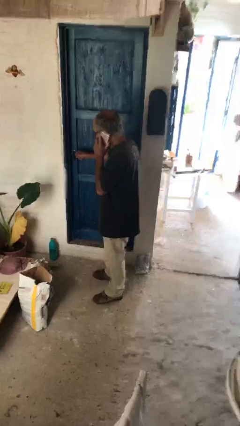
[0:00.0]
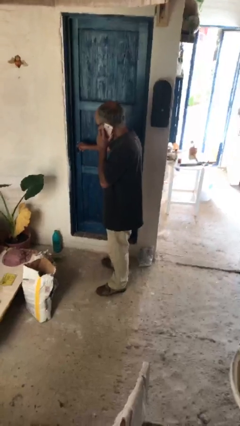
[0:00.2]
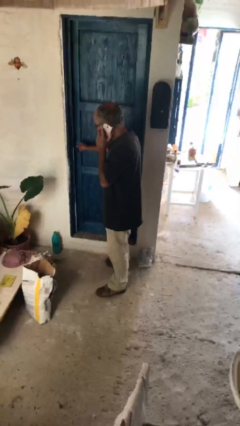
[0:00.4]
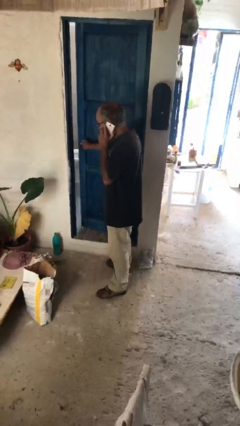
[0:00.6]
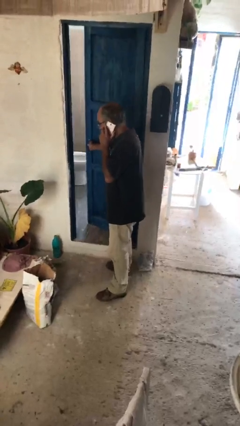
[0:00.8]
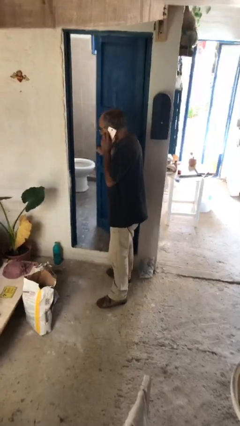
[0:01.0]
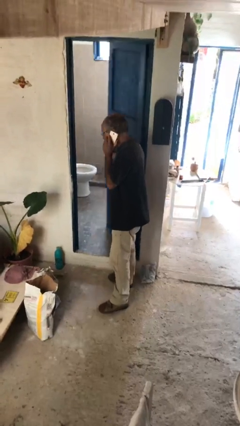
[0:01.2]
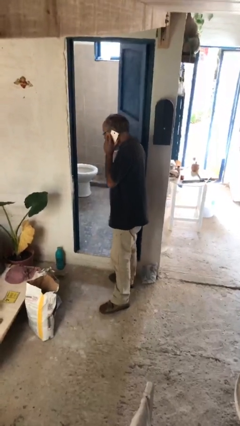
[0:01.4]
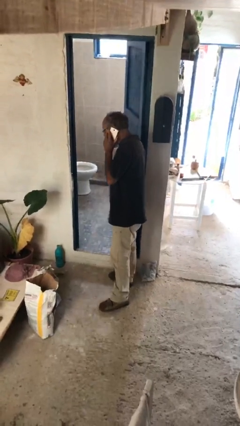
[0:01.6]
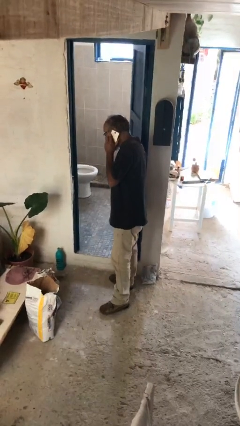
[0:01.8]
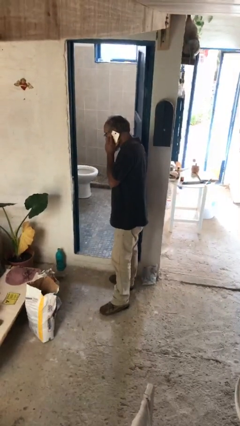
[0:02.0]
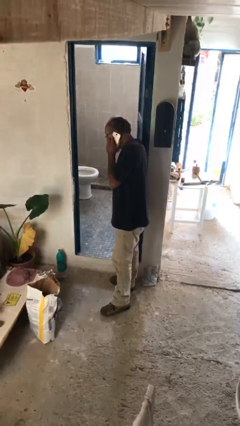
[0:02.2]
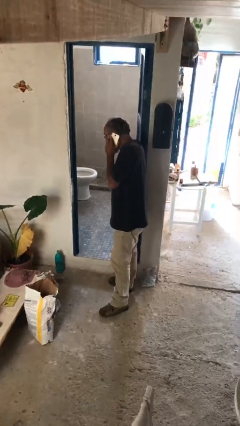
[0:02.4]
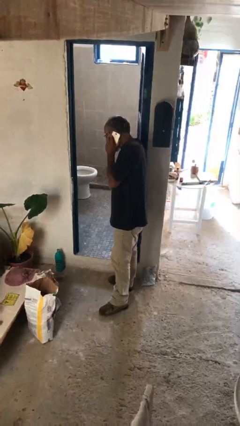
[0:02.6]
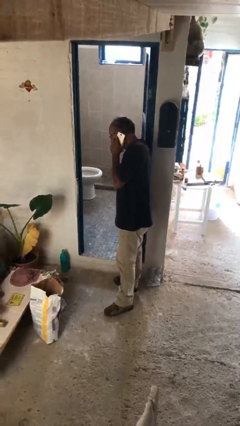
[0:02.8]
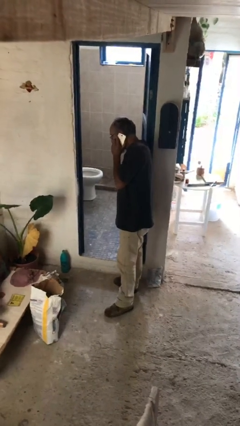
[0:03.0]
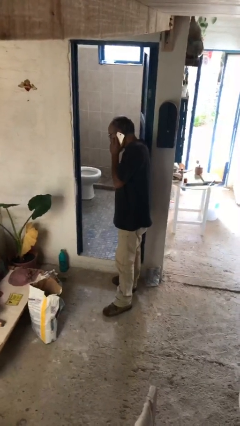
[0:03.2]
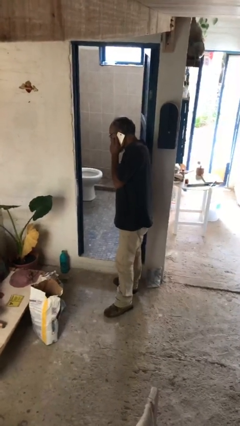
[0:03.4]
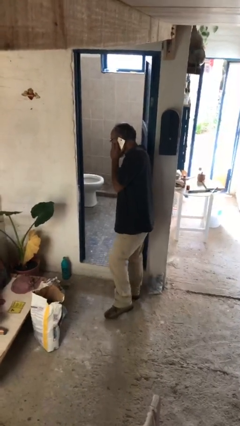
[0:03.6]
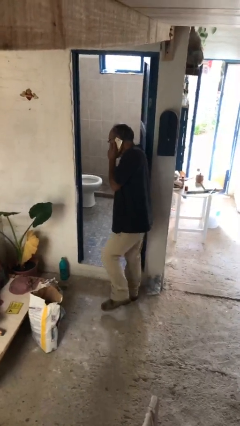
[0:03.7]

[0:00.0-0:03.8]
person opens facility door

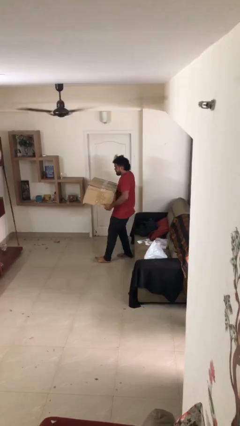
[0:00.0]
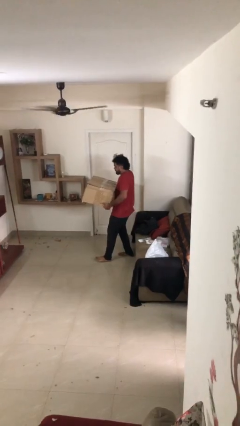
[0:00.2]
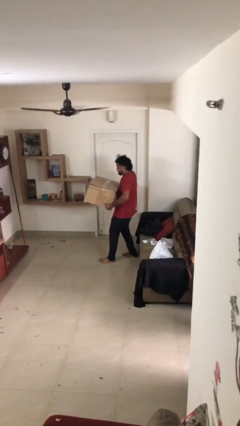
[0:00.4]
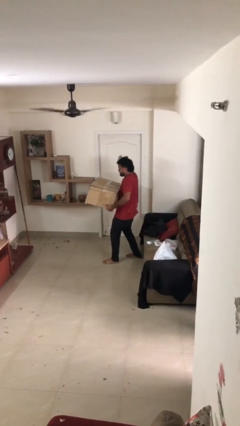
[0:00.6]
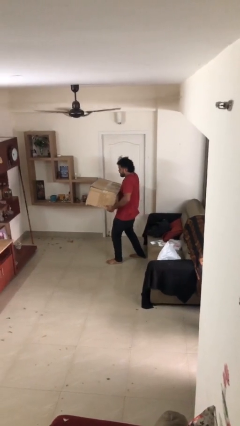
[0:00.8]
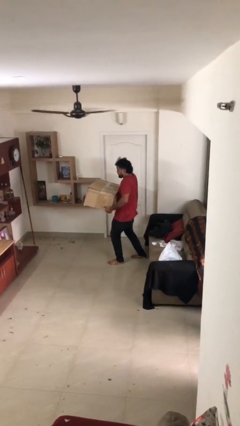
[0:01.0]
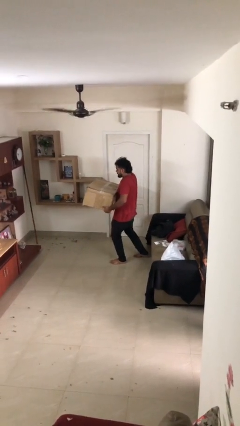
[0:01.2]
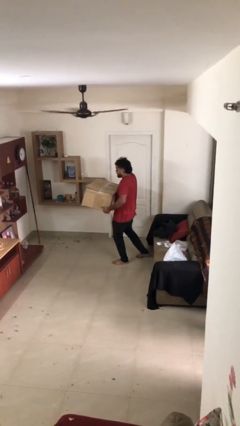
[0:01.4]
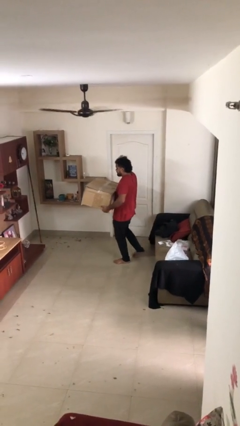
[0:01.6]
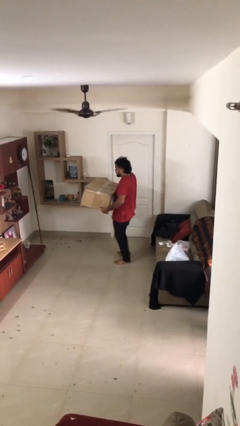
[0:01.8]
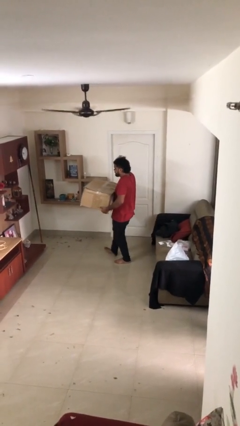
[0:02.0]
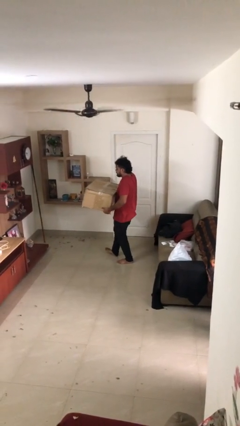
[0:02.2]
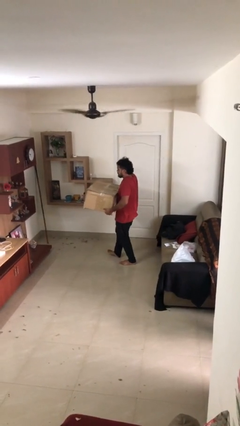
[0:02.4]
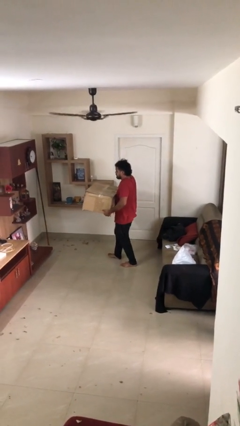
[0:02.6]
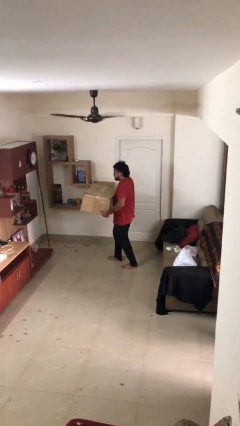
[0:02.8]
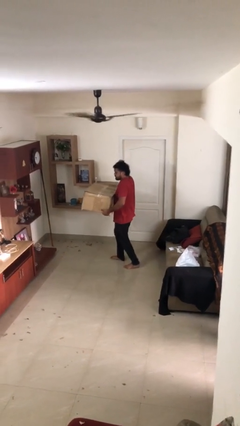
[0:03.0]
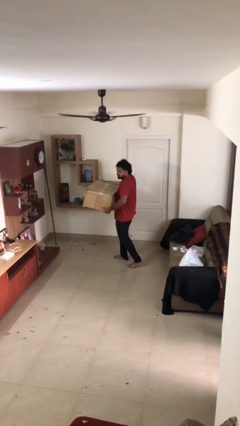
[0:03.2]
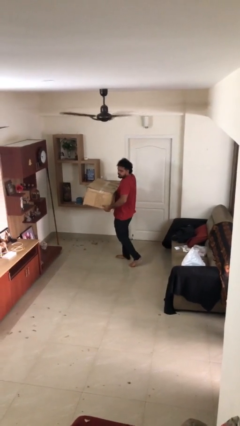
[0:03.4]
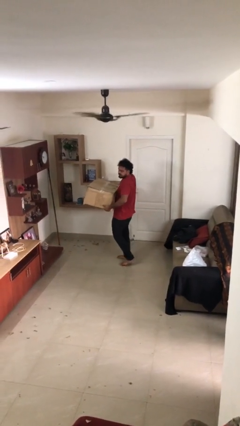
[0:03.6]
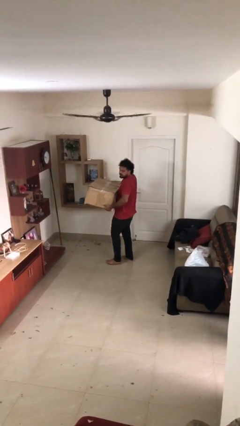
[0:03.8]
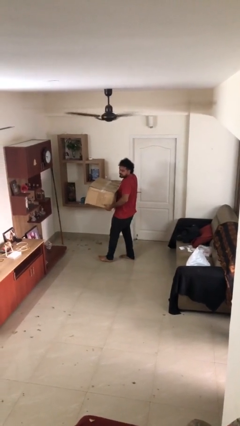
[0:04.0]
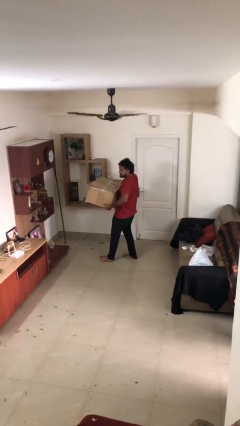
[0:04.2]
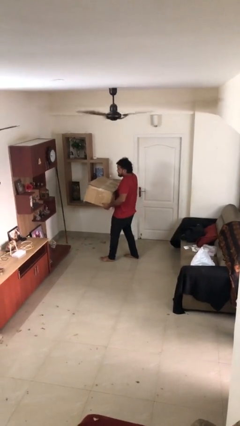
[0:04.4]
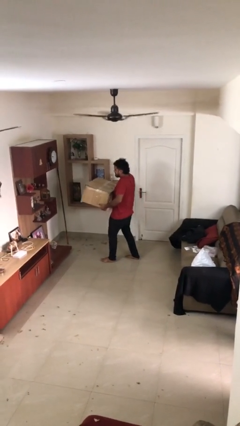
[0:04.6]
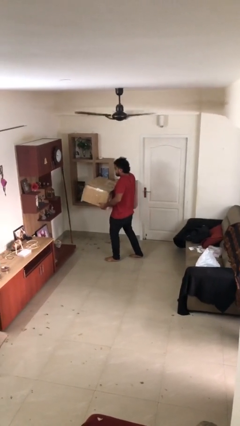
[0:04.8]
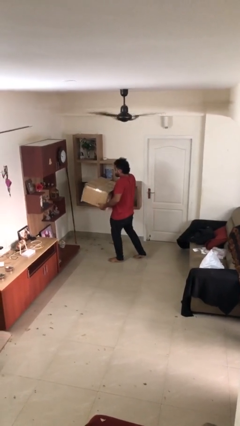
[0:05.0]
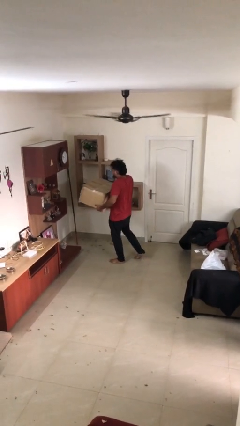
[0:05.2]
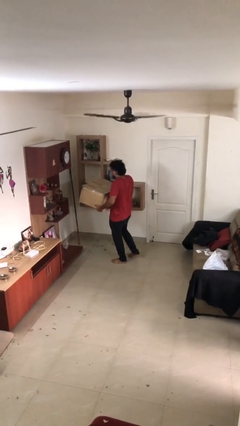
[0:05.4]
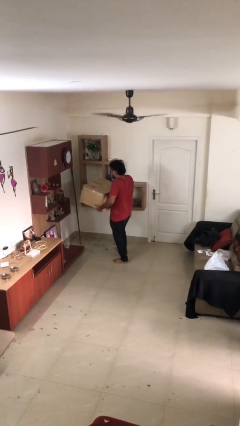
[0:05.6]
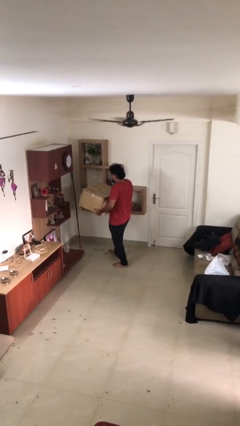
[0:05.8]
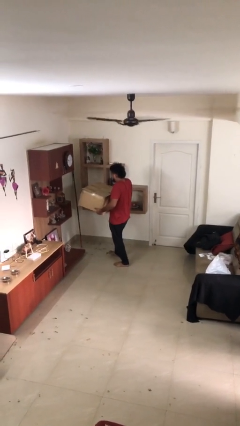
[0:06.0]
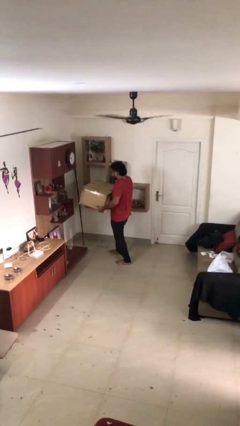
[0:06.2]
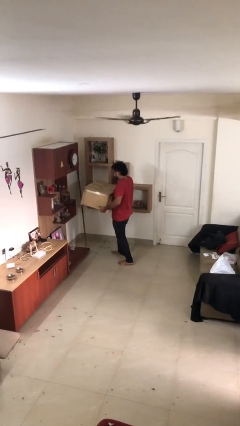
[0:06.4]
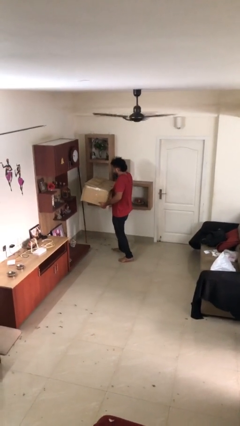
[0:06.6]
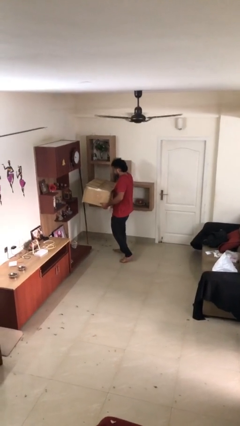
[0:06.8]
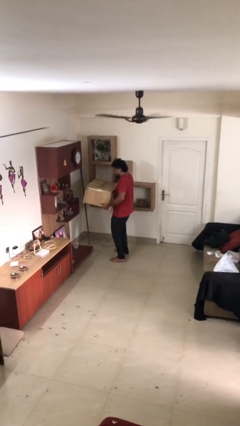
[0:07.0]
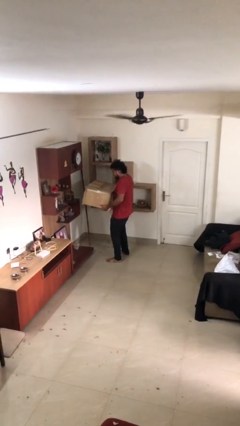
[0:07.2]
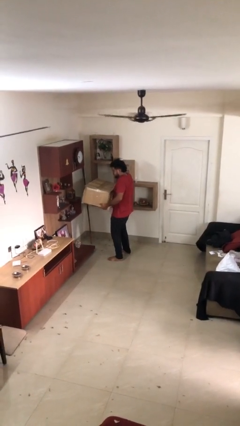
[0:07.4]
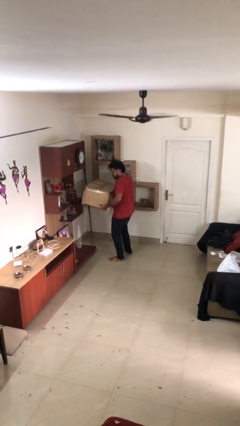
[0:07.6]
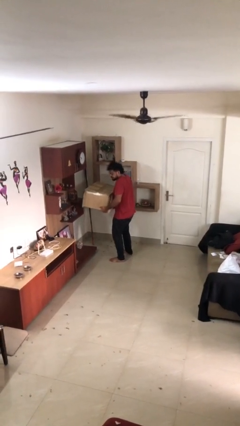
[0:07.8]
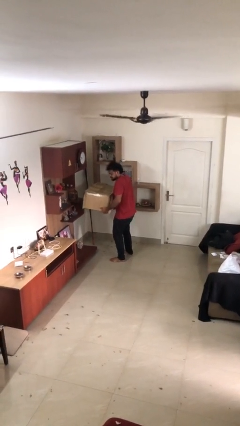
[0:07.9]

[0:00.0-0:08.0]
person carries heavy object

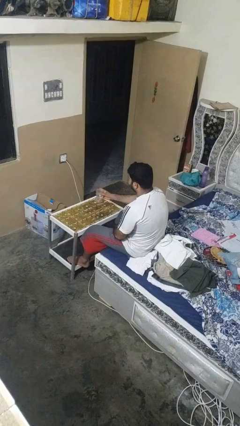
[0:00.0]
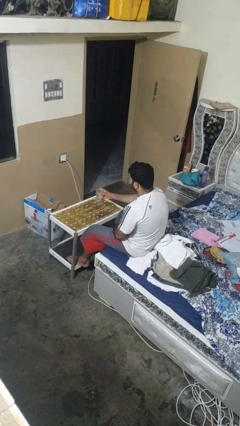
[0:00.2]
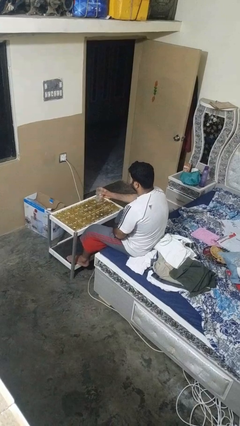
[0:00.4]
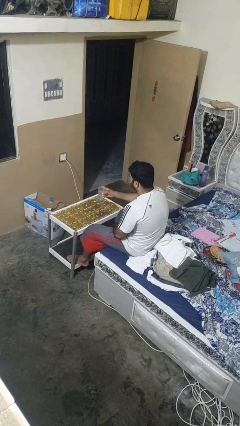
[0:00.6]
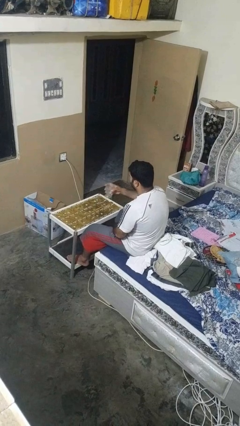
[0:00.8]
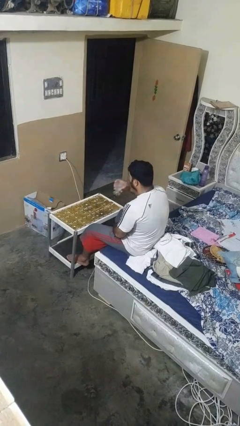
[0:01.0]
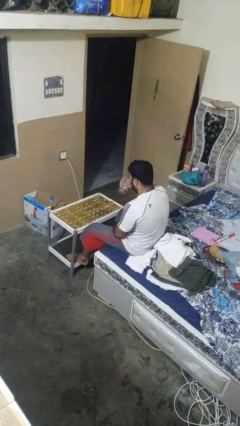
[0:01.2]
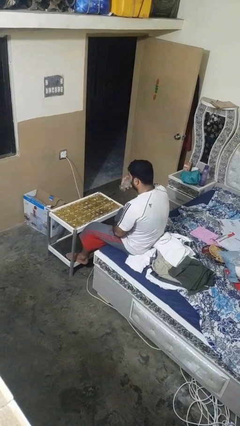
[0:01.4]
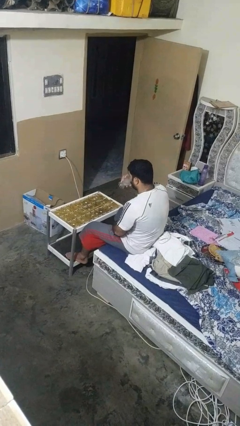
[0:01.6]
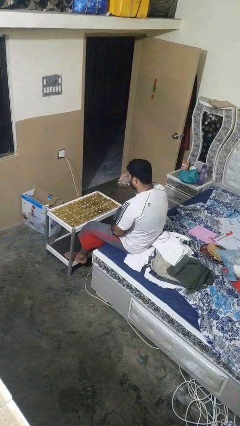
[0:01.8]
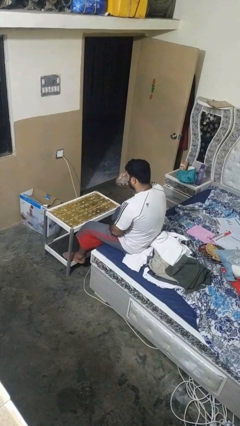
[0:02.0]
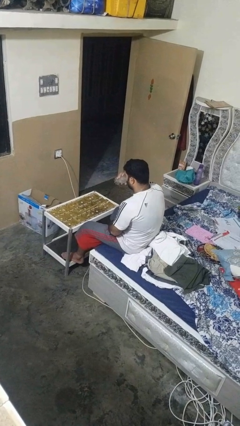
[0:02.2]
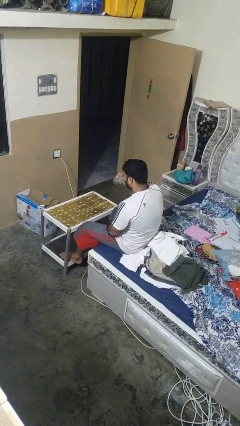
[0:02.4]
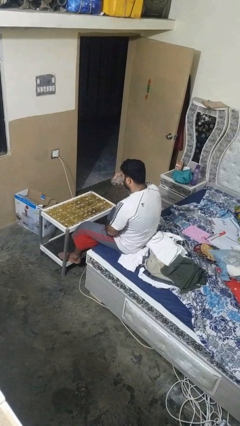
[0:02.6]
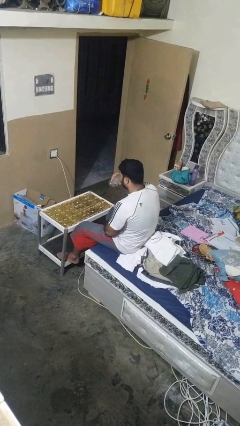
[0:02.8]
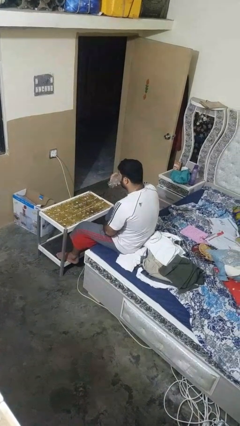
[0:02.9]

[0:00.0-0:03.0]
person drinks from shotglass

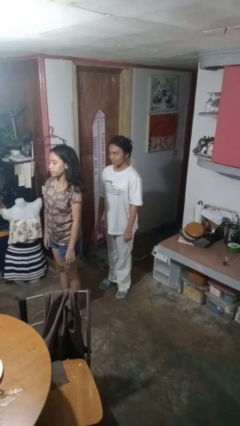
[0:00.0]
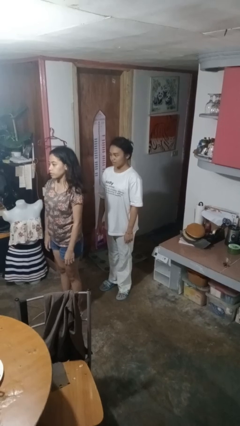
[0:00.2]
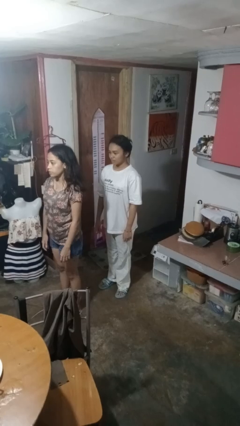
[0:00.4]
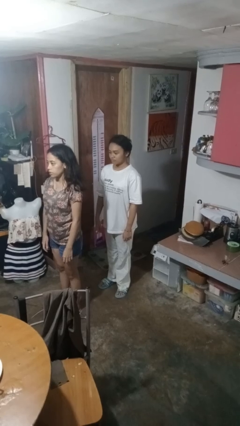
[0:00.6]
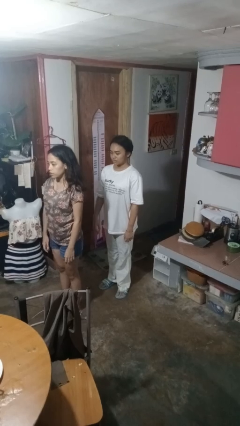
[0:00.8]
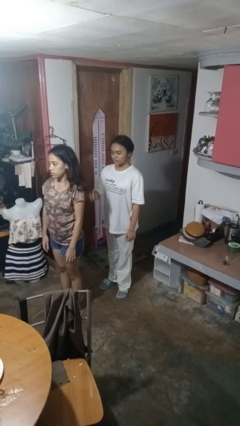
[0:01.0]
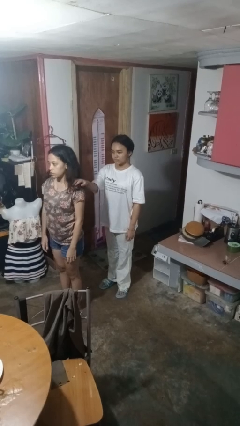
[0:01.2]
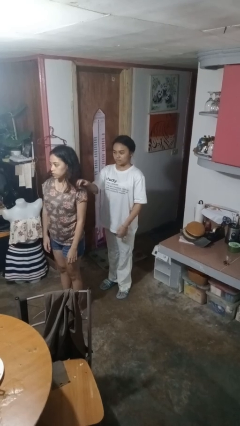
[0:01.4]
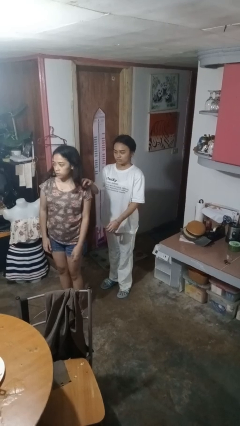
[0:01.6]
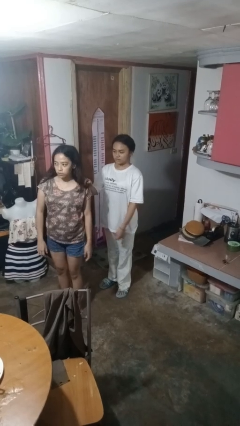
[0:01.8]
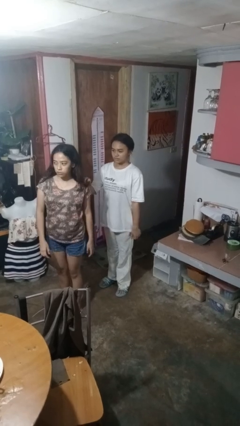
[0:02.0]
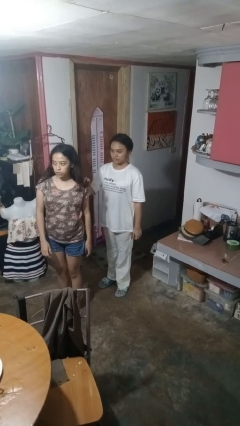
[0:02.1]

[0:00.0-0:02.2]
person grabs person by shoulder

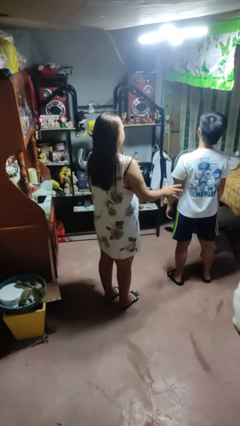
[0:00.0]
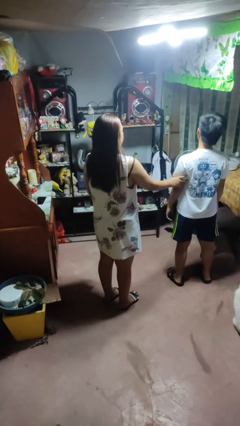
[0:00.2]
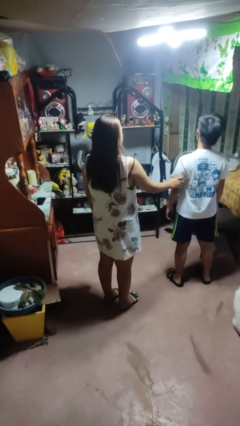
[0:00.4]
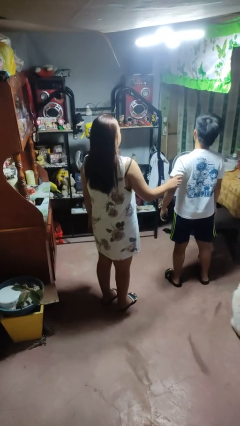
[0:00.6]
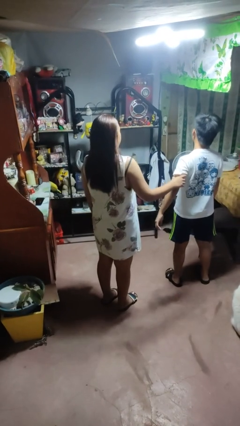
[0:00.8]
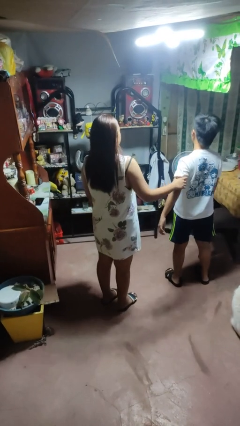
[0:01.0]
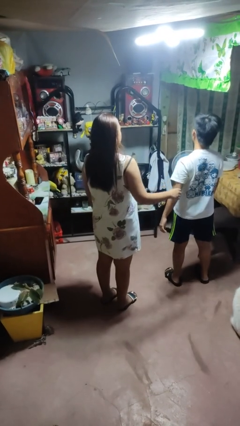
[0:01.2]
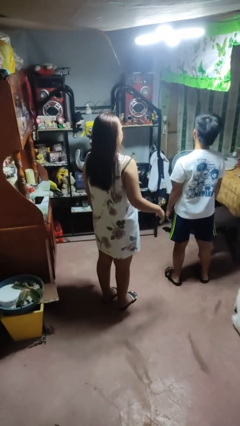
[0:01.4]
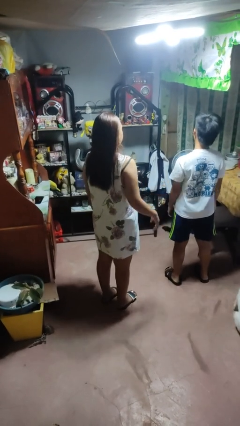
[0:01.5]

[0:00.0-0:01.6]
person grabs person by bicep
